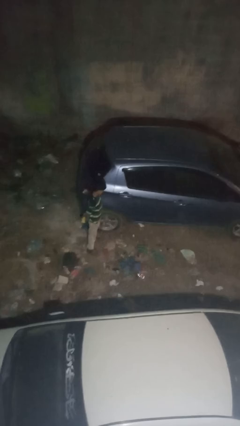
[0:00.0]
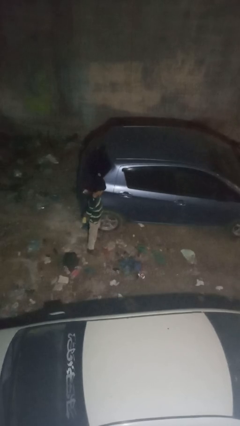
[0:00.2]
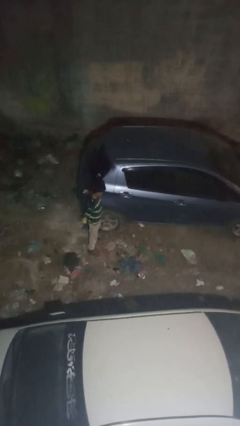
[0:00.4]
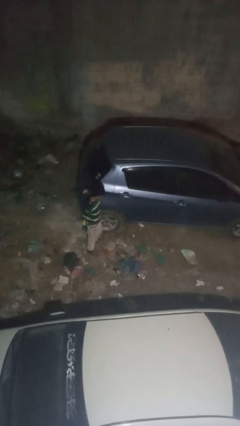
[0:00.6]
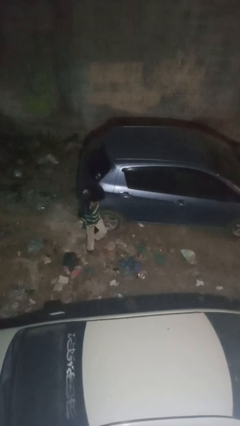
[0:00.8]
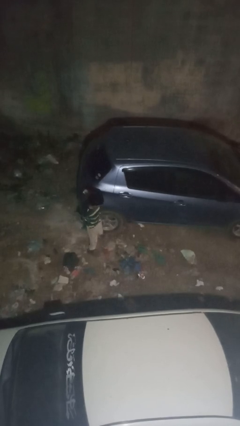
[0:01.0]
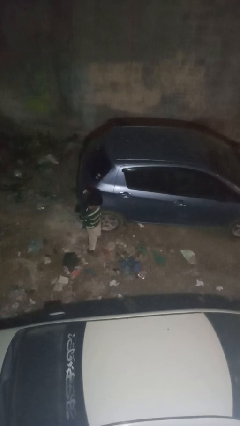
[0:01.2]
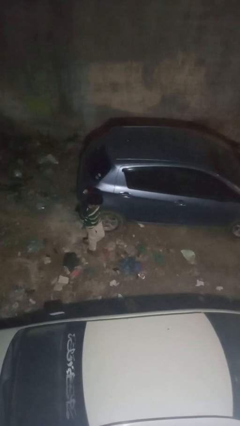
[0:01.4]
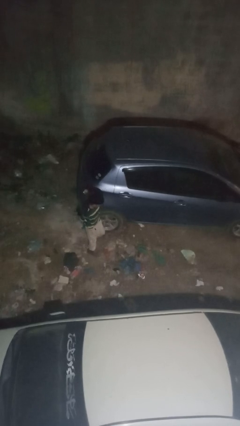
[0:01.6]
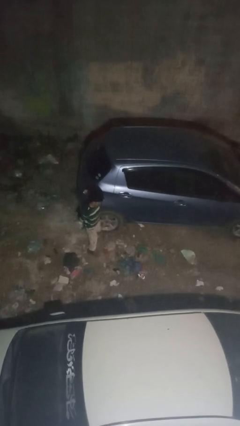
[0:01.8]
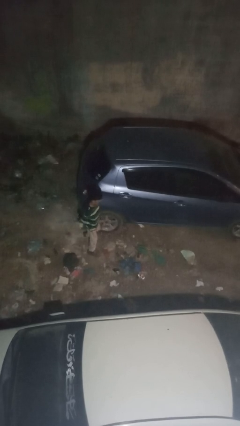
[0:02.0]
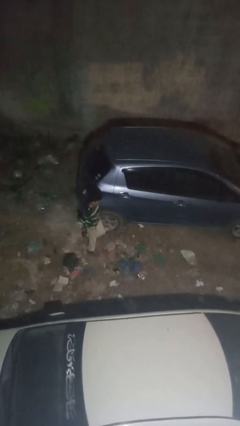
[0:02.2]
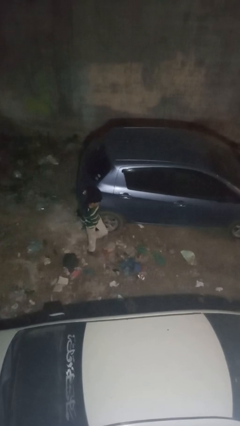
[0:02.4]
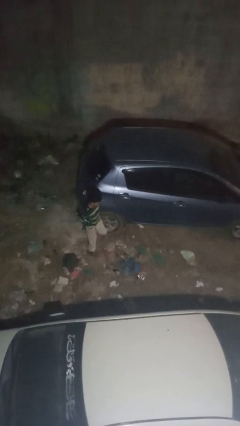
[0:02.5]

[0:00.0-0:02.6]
person kicks car tires

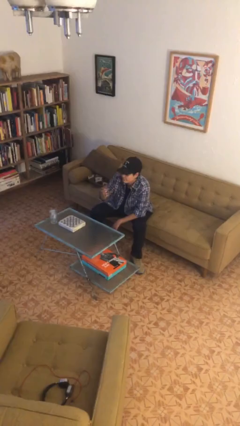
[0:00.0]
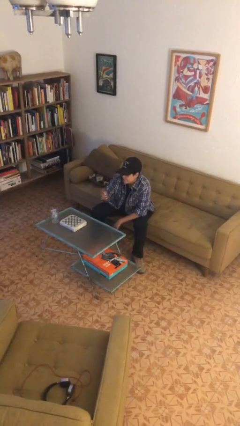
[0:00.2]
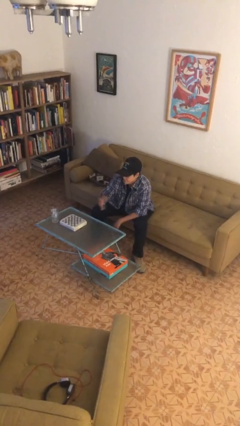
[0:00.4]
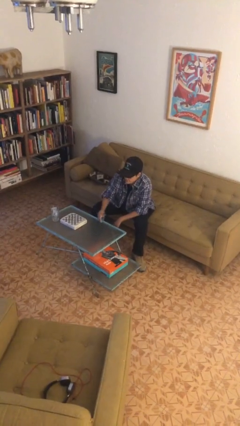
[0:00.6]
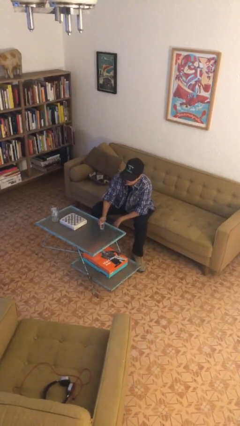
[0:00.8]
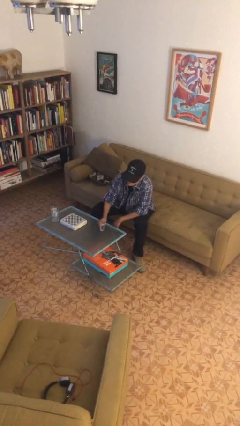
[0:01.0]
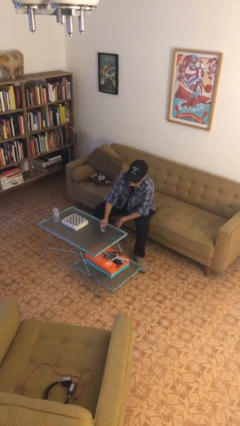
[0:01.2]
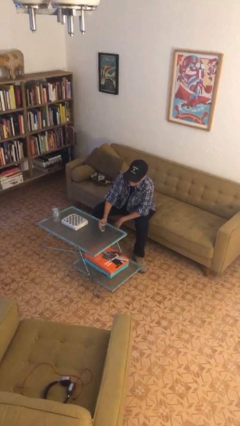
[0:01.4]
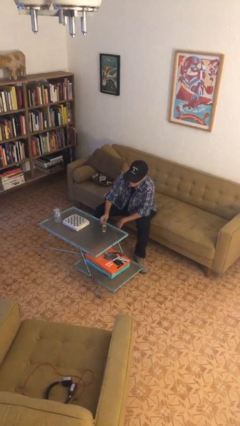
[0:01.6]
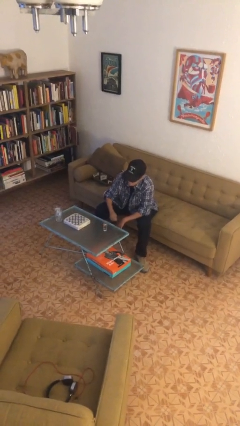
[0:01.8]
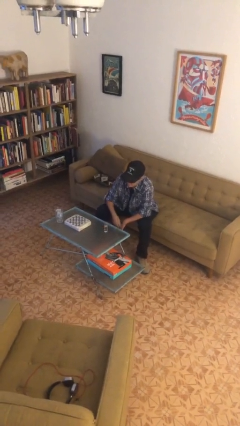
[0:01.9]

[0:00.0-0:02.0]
person puts down object on table

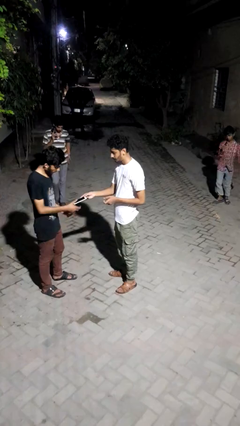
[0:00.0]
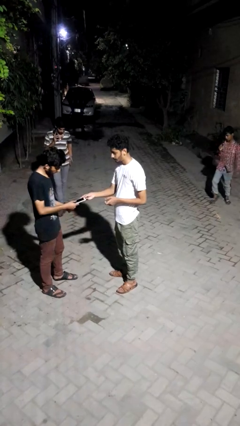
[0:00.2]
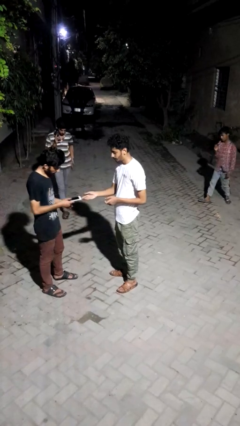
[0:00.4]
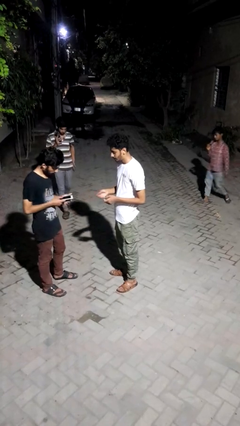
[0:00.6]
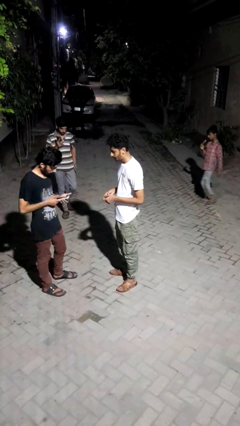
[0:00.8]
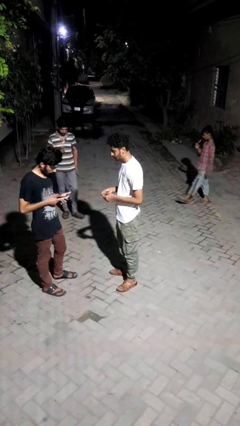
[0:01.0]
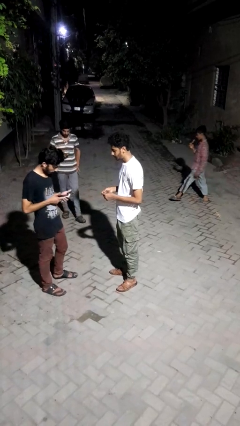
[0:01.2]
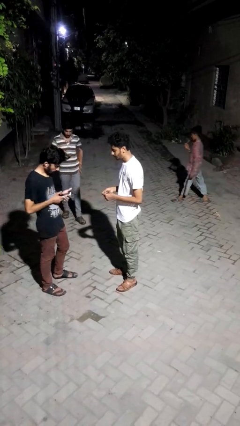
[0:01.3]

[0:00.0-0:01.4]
person transfers object to person

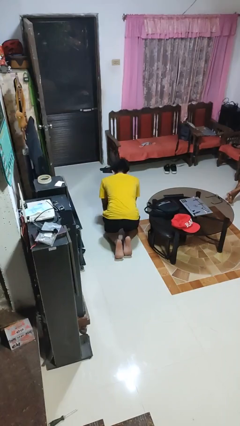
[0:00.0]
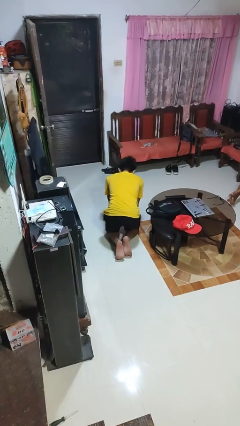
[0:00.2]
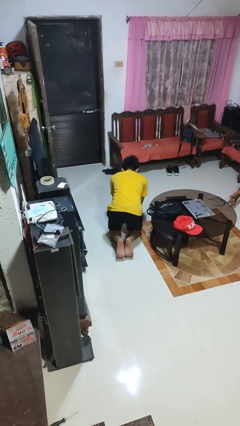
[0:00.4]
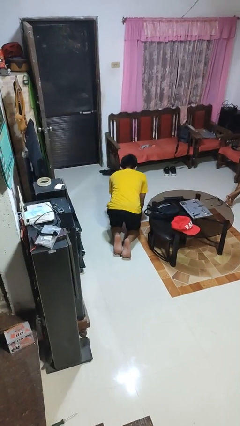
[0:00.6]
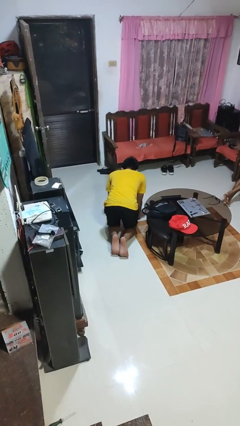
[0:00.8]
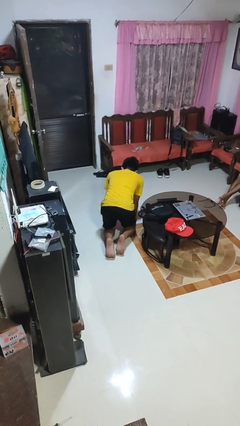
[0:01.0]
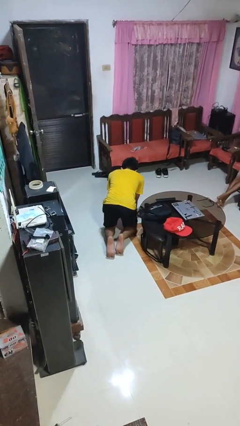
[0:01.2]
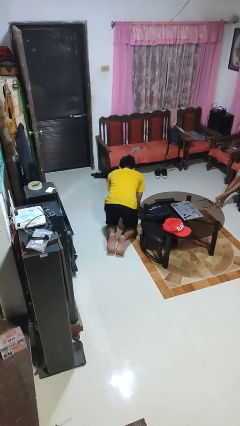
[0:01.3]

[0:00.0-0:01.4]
person crawls

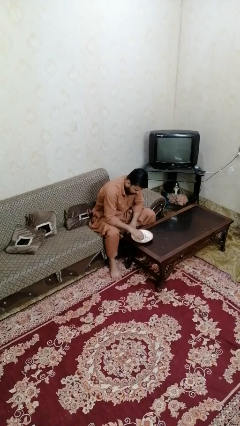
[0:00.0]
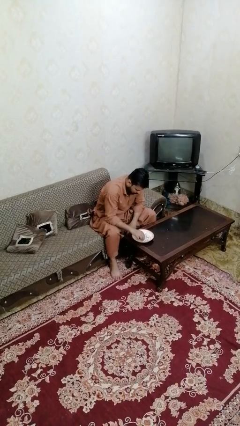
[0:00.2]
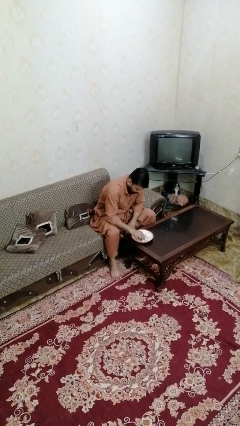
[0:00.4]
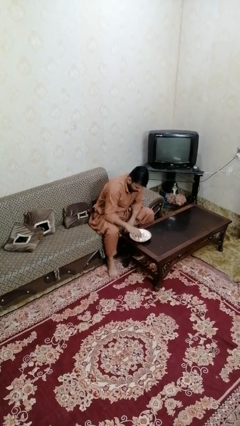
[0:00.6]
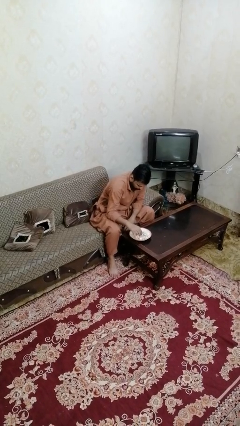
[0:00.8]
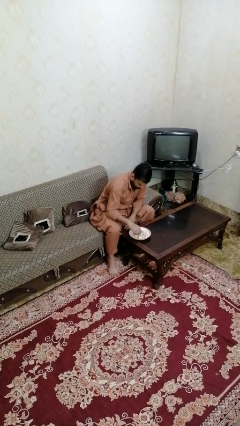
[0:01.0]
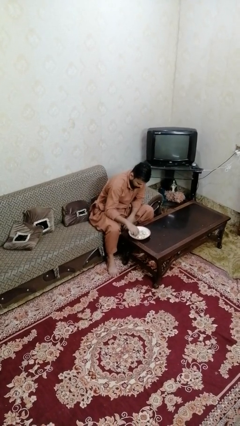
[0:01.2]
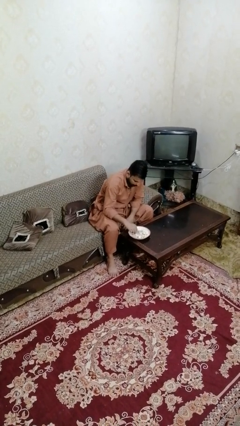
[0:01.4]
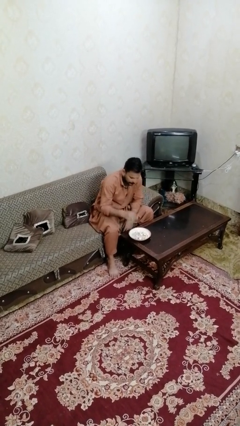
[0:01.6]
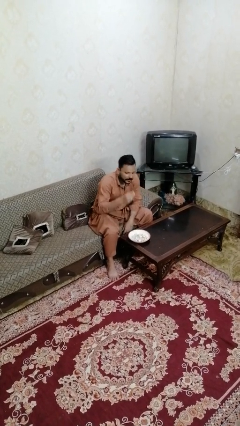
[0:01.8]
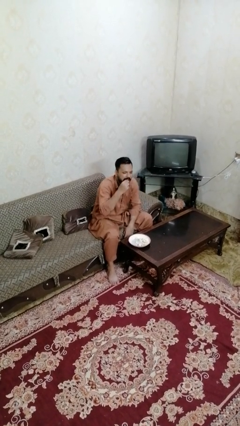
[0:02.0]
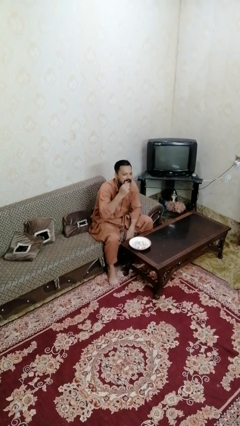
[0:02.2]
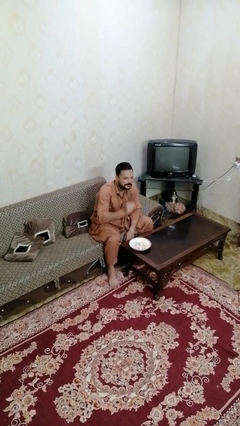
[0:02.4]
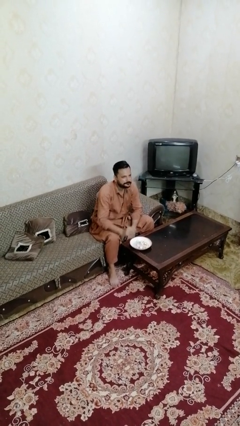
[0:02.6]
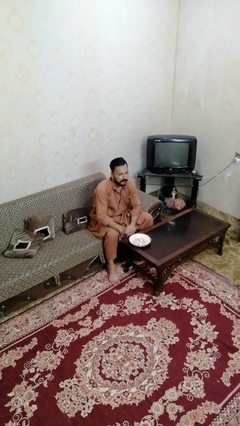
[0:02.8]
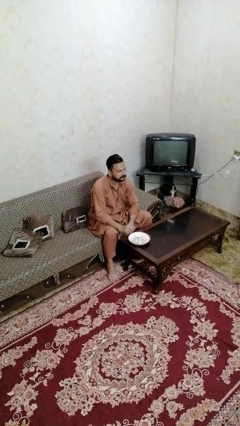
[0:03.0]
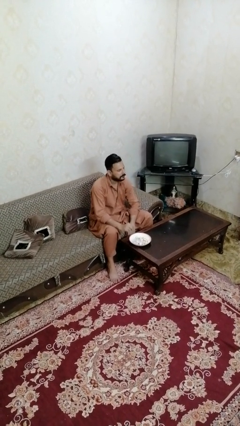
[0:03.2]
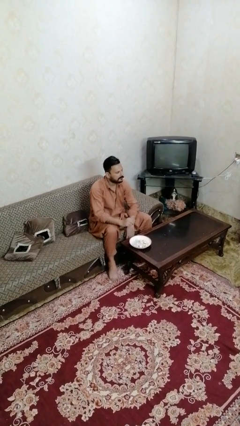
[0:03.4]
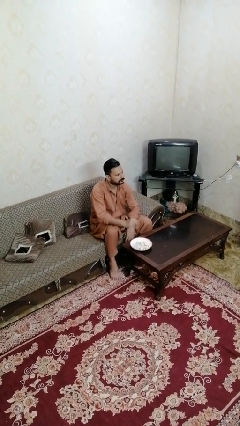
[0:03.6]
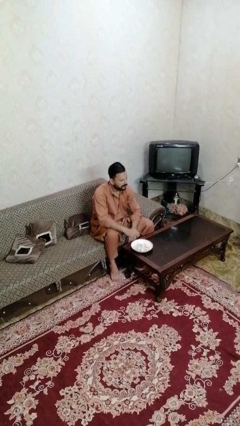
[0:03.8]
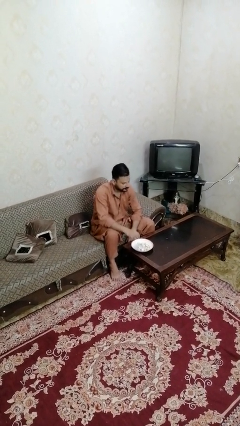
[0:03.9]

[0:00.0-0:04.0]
person eats with hands

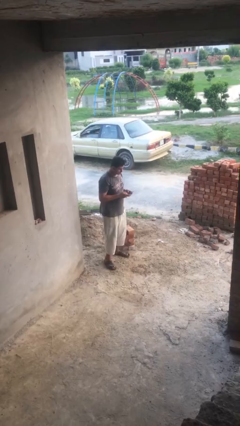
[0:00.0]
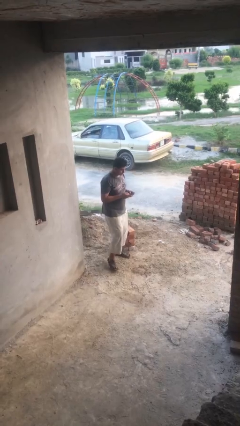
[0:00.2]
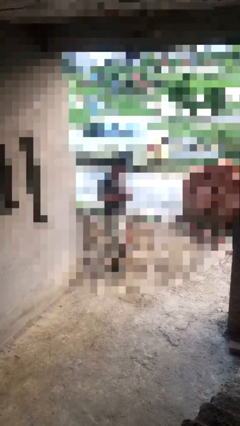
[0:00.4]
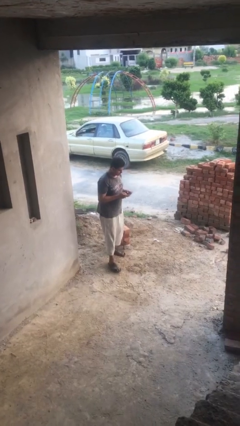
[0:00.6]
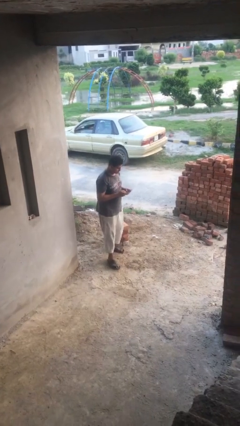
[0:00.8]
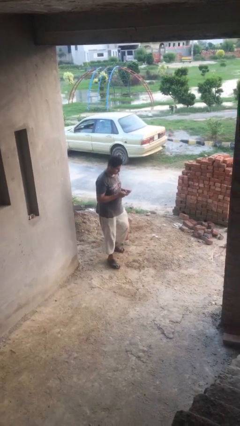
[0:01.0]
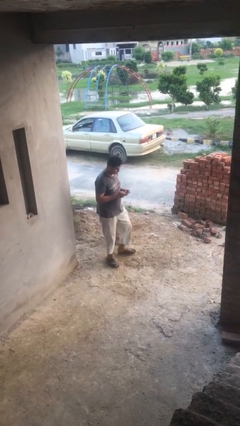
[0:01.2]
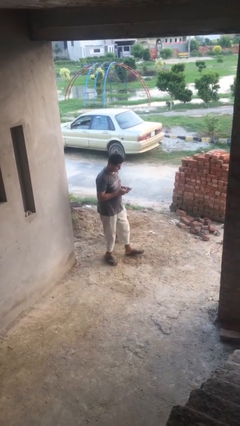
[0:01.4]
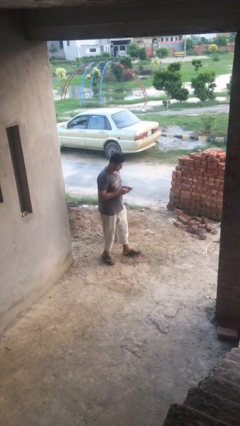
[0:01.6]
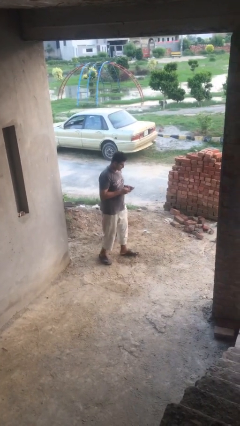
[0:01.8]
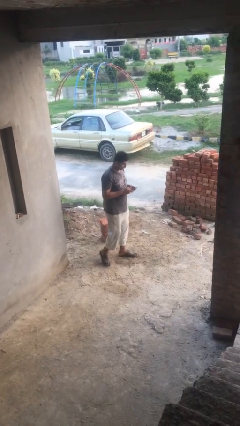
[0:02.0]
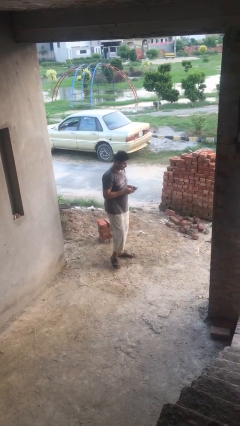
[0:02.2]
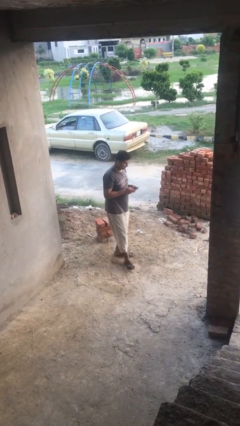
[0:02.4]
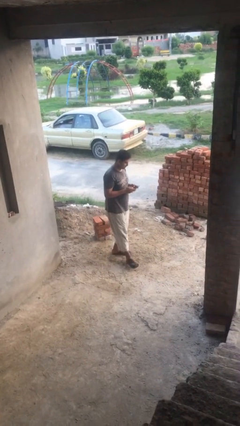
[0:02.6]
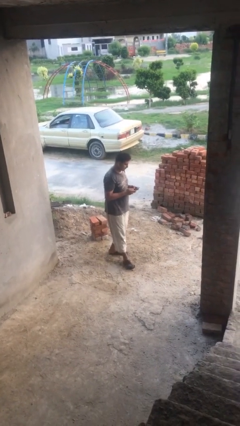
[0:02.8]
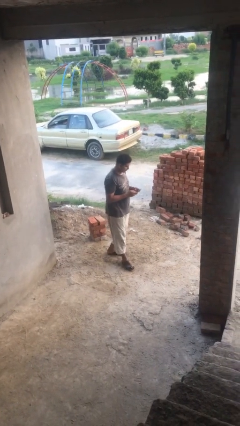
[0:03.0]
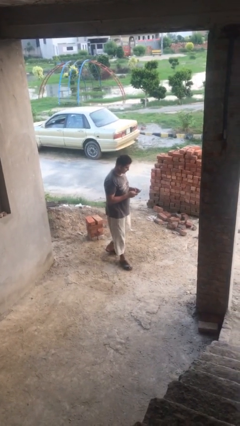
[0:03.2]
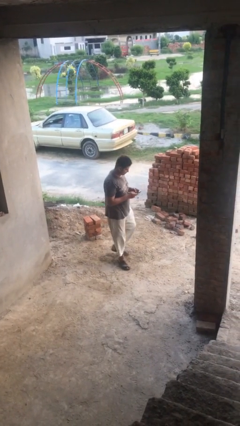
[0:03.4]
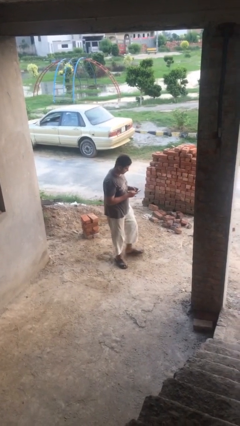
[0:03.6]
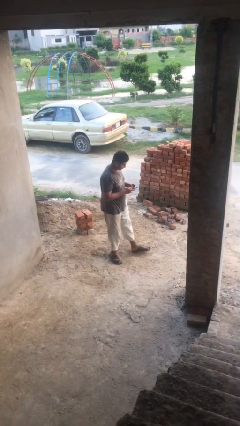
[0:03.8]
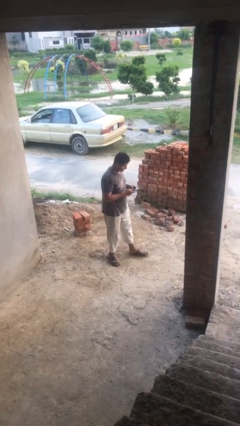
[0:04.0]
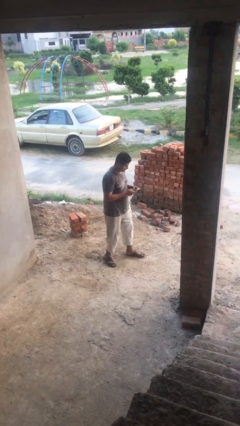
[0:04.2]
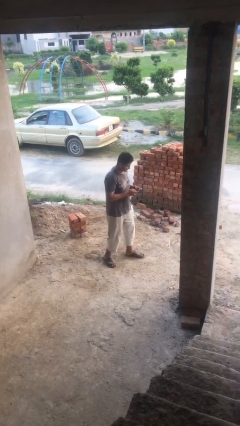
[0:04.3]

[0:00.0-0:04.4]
person texts on phone

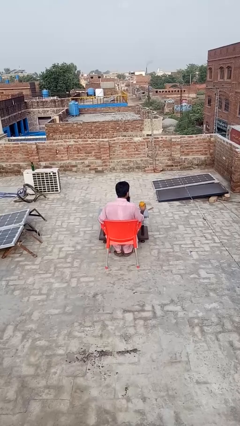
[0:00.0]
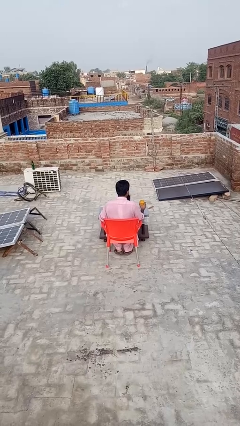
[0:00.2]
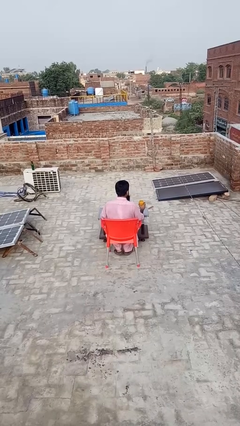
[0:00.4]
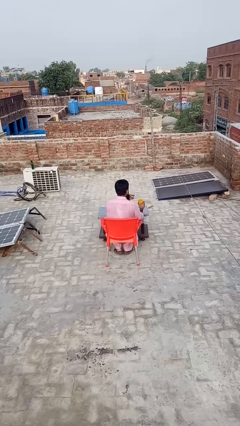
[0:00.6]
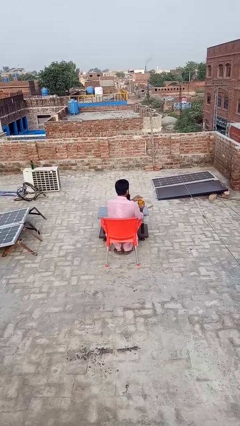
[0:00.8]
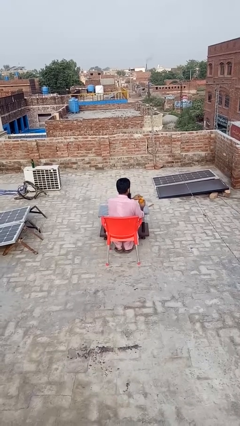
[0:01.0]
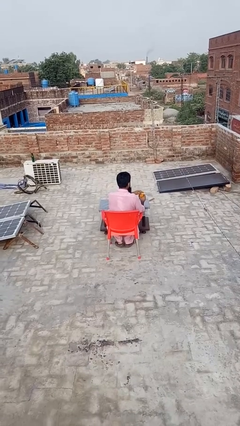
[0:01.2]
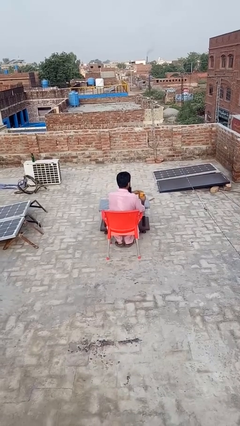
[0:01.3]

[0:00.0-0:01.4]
person closes jar
